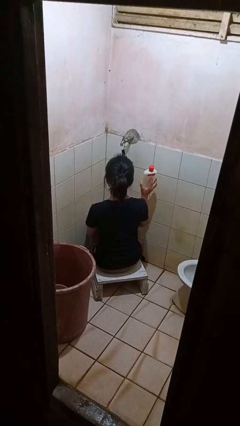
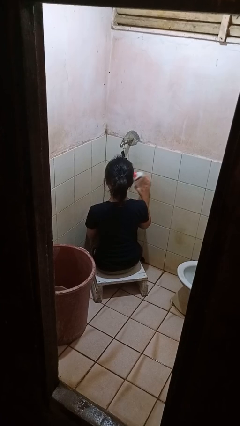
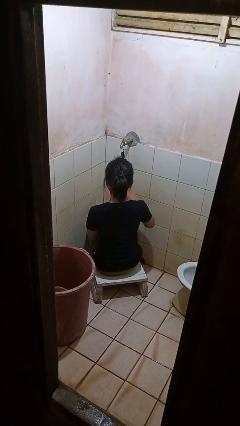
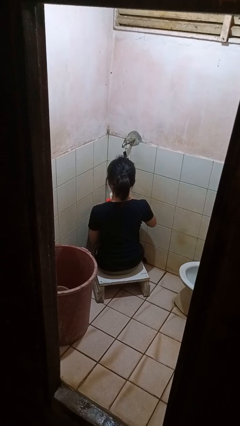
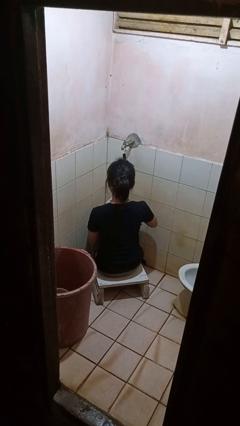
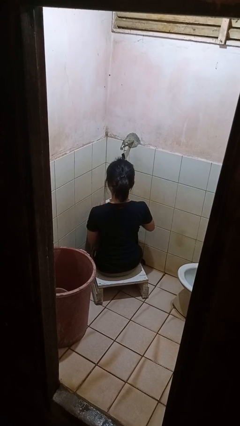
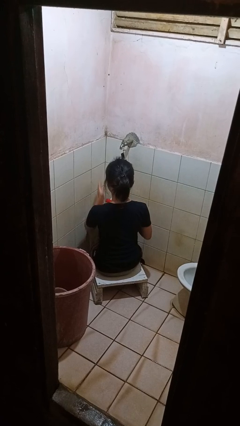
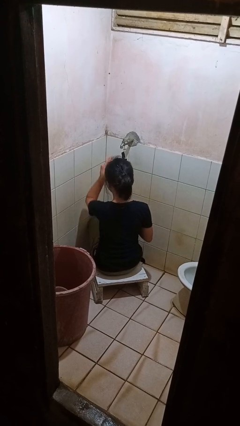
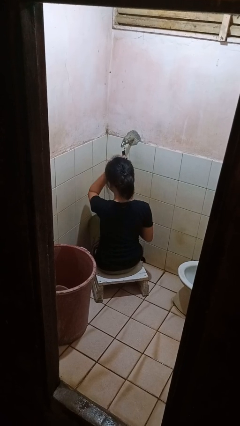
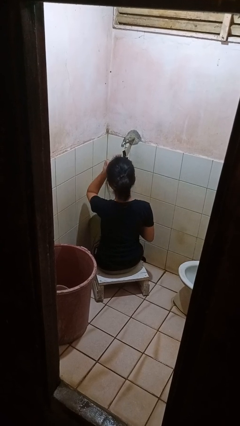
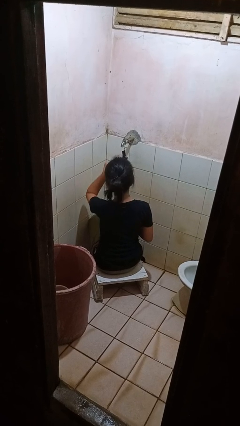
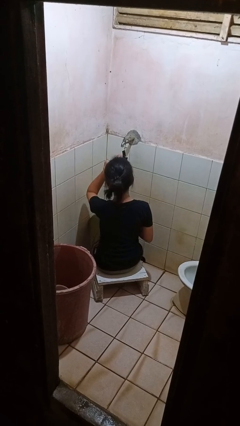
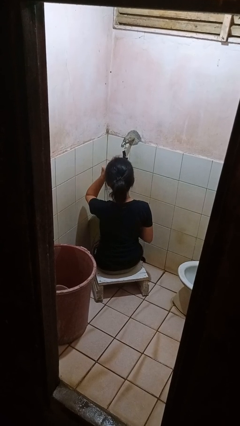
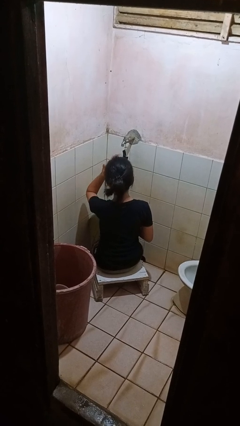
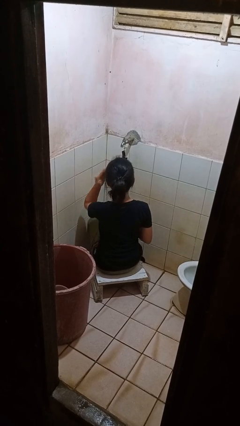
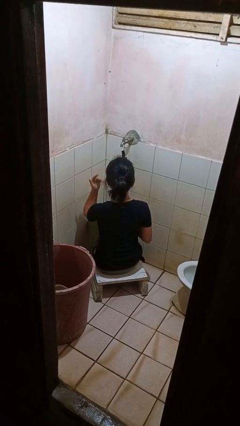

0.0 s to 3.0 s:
person applies facial moisturizer

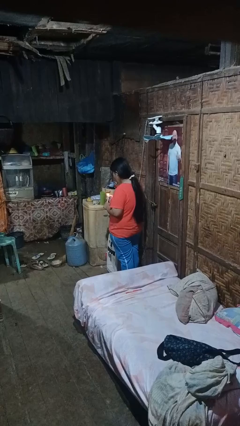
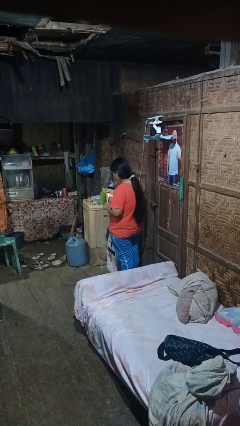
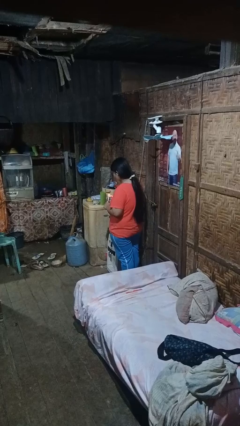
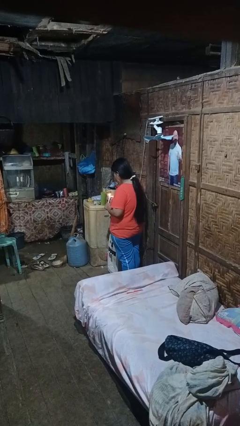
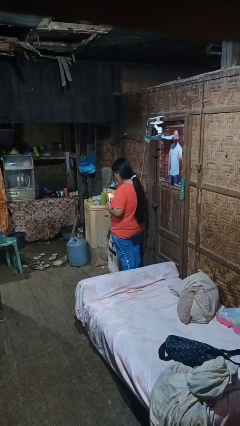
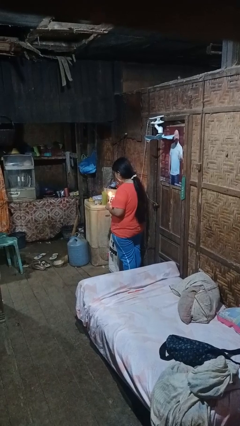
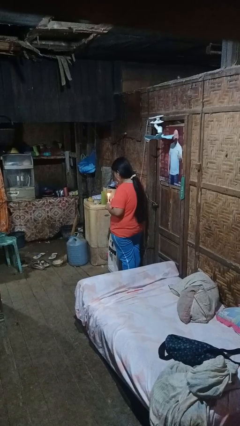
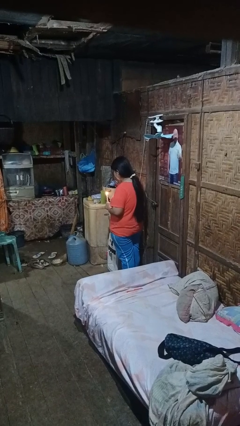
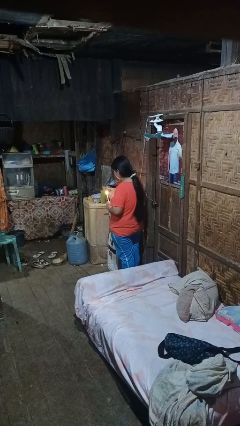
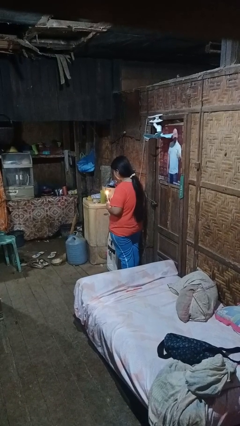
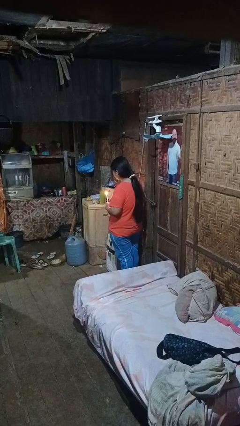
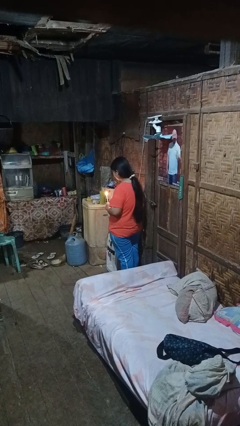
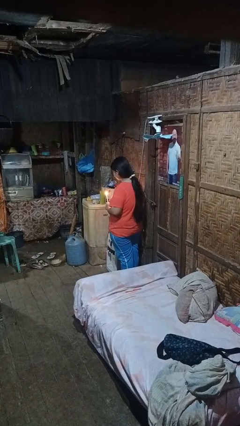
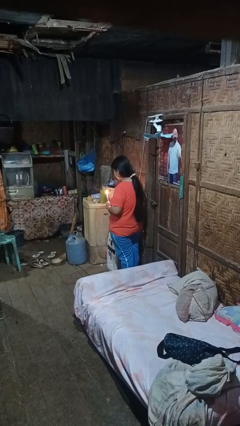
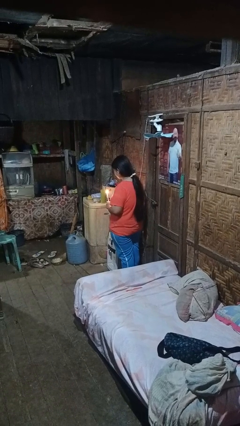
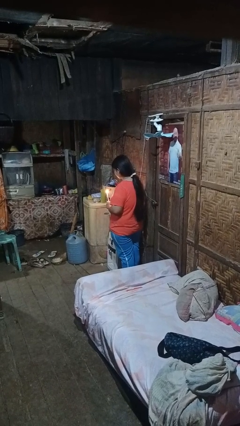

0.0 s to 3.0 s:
person lights candle

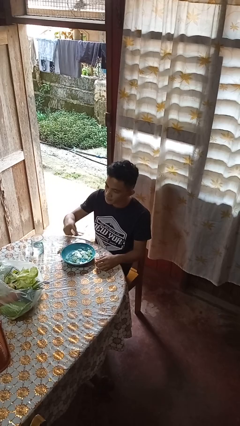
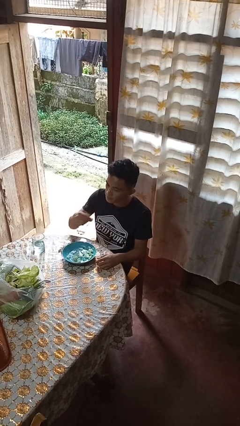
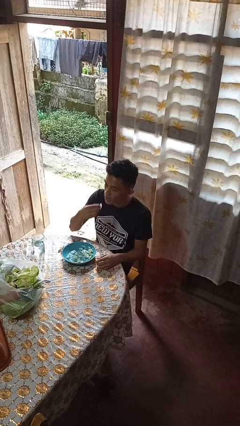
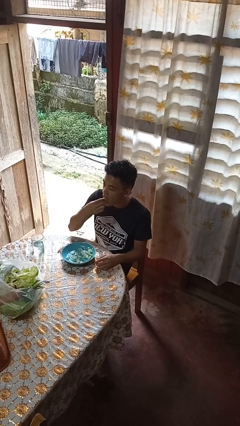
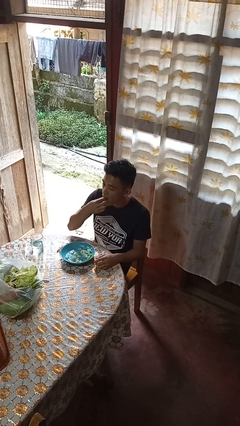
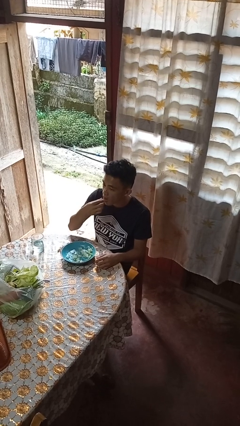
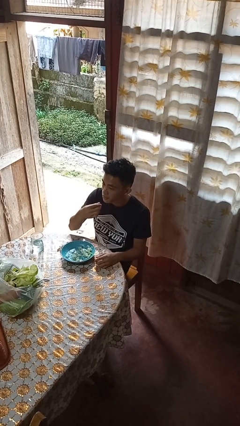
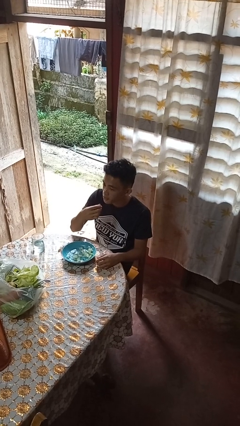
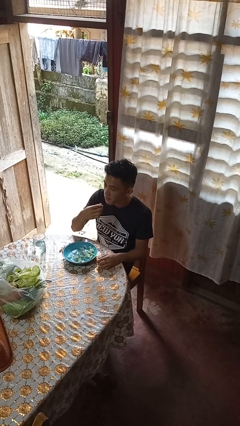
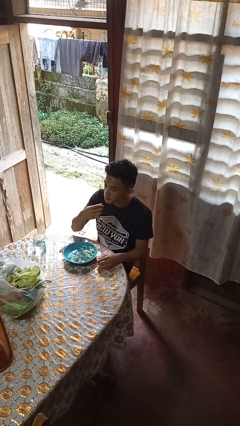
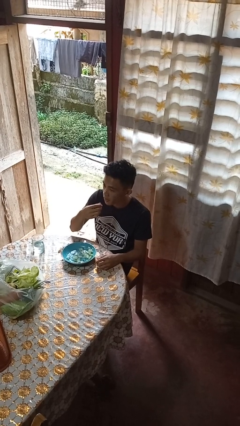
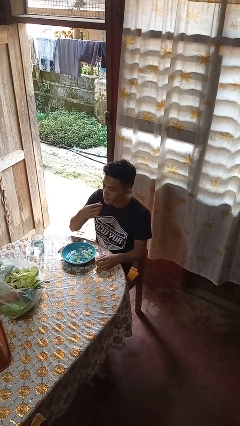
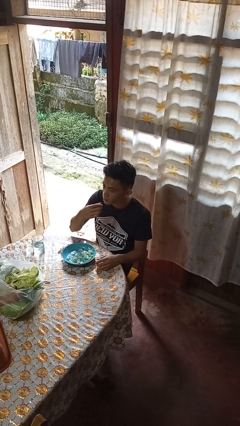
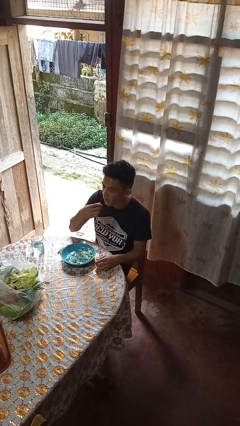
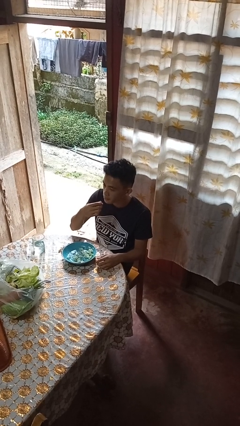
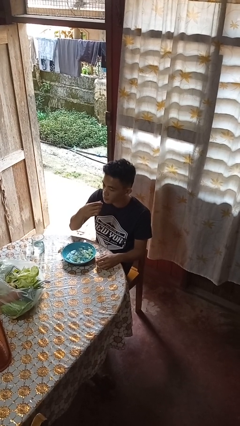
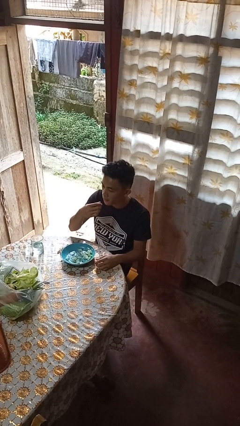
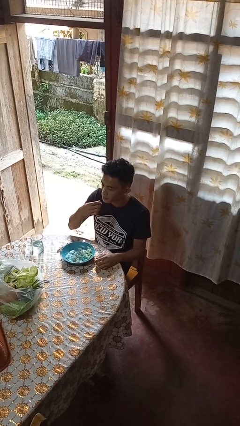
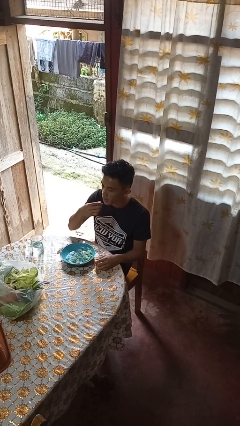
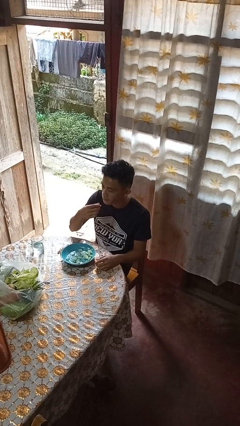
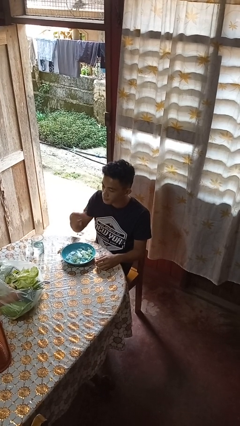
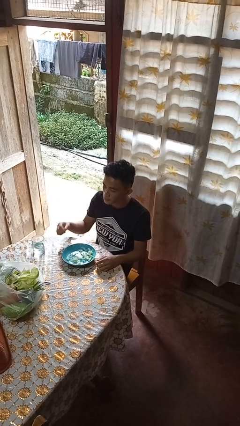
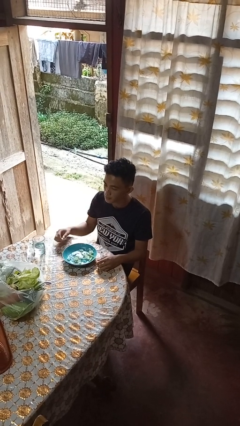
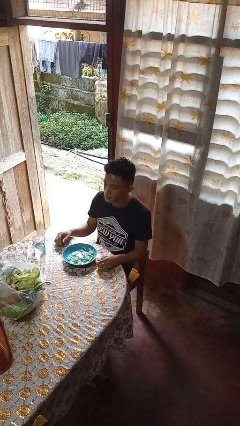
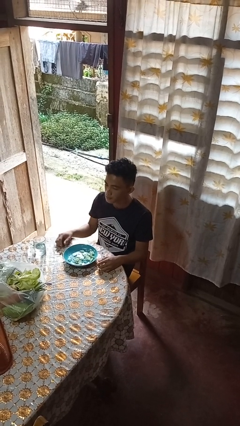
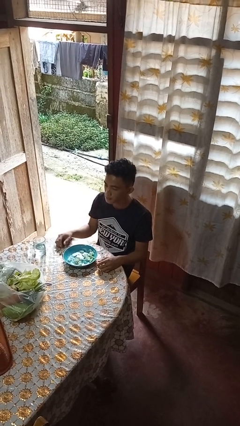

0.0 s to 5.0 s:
person eats with hands

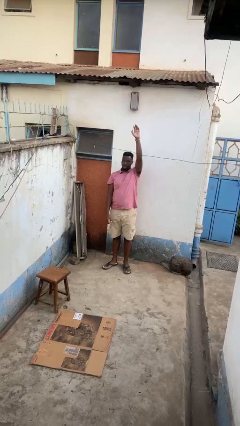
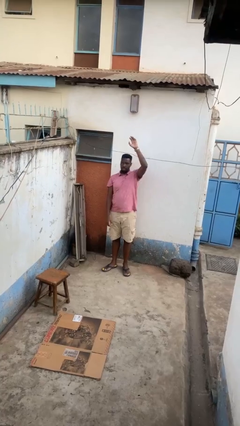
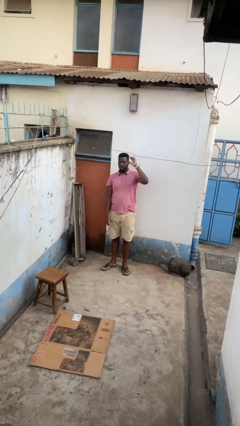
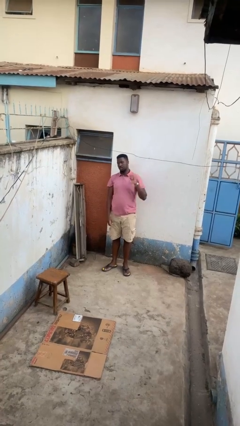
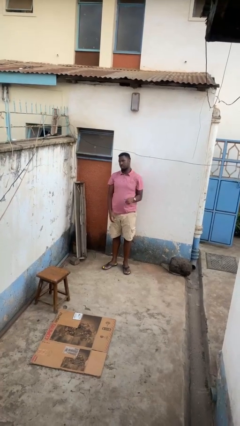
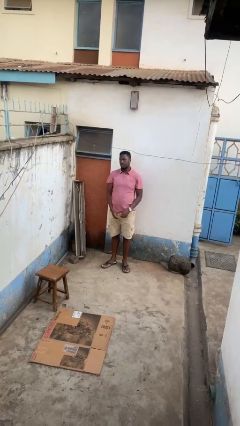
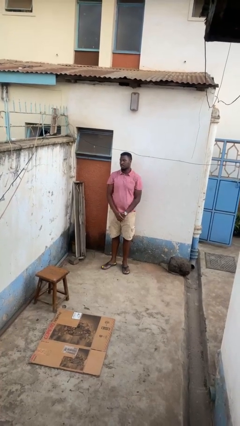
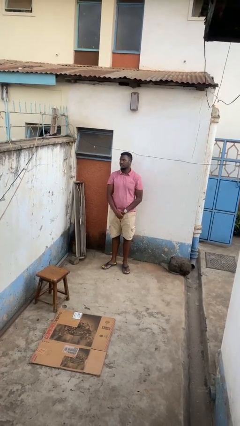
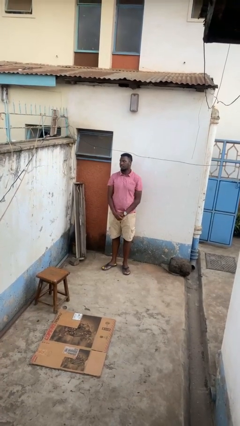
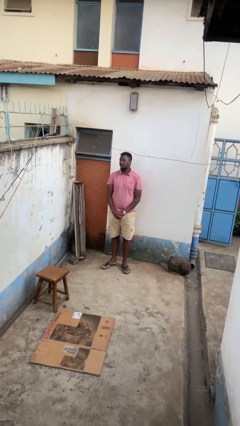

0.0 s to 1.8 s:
person gestures lower hand

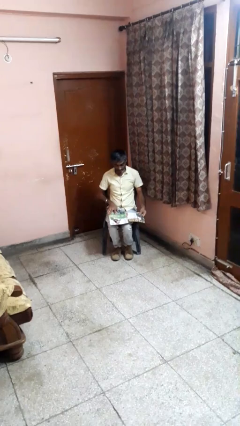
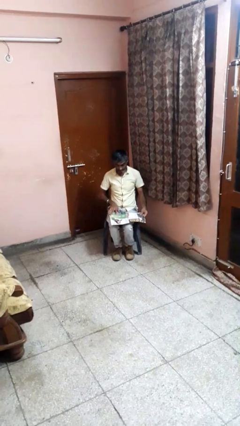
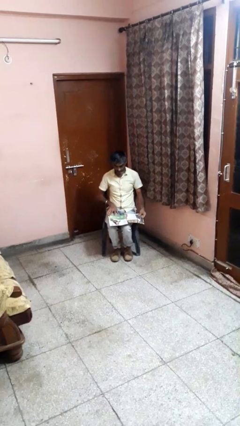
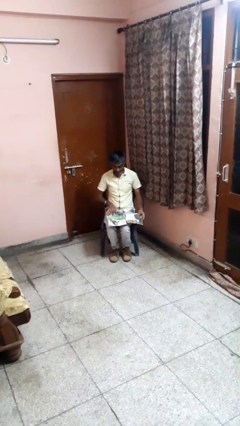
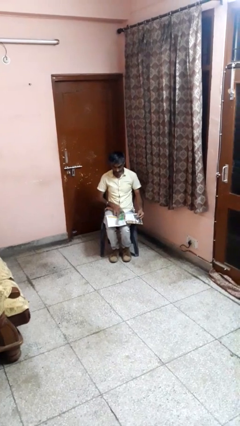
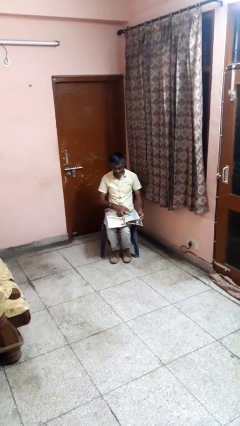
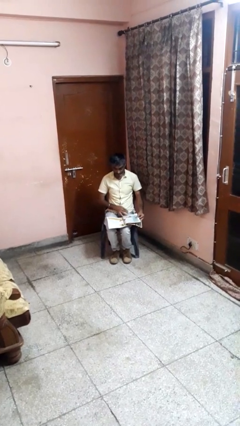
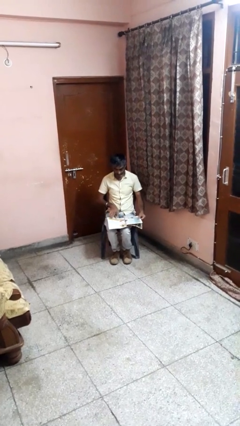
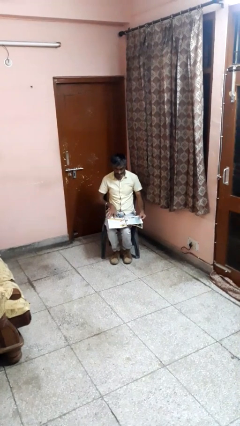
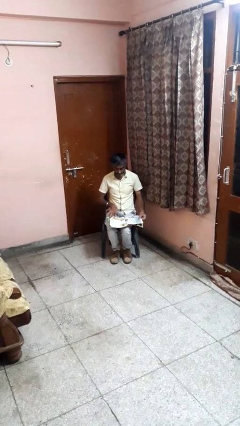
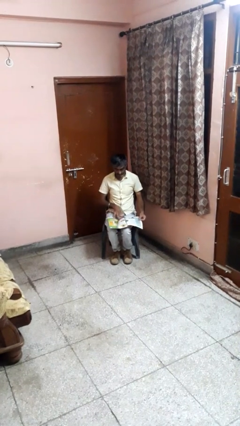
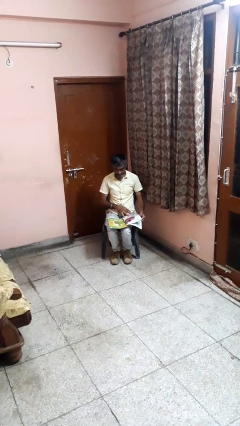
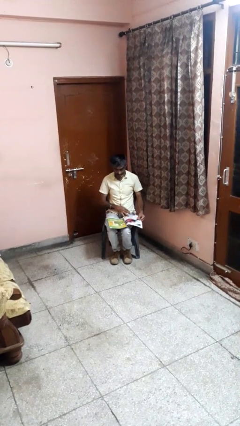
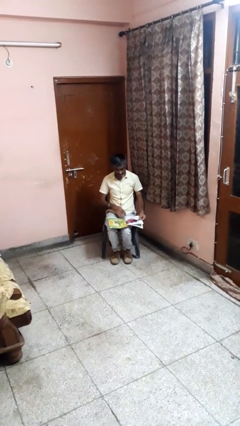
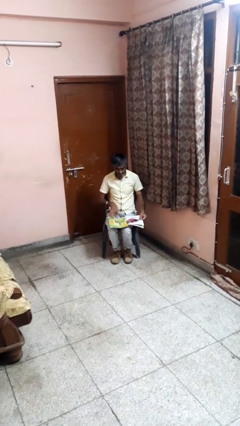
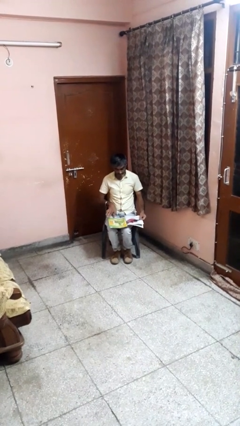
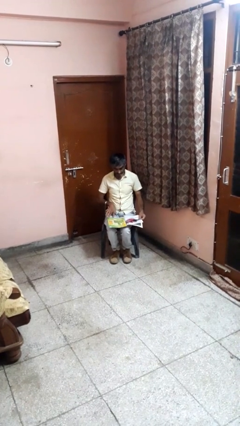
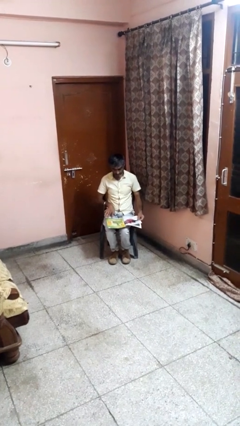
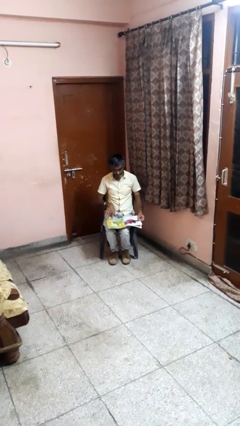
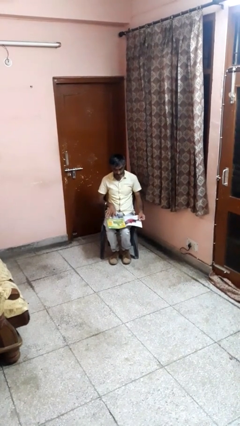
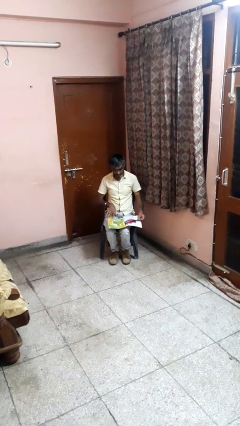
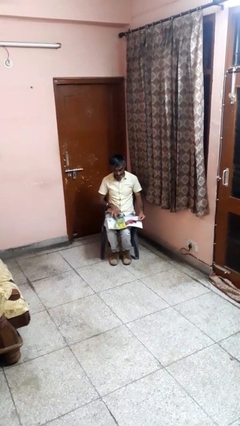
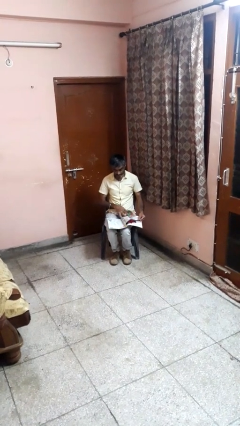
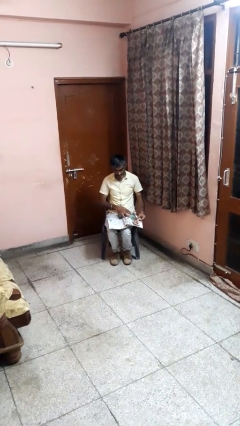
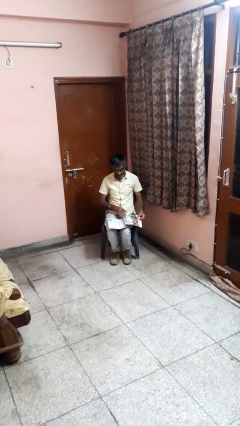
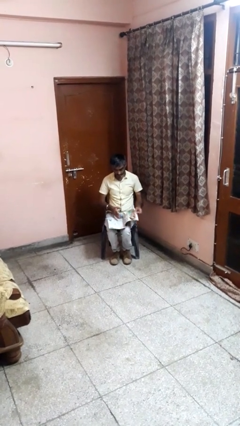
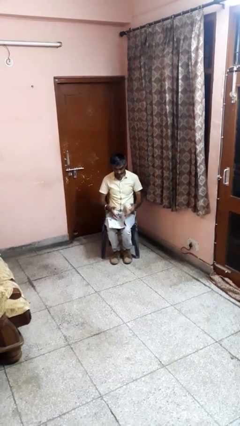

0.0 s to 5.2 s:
person reads magazine
